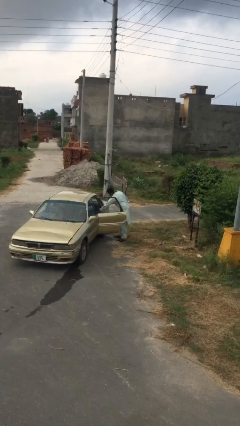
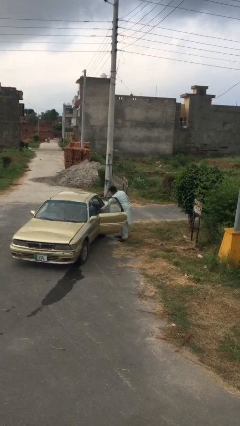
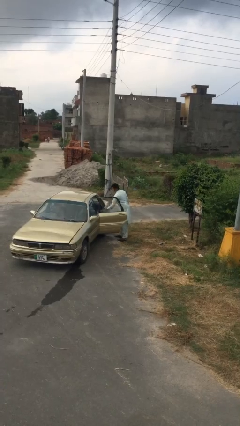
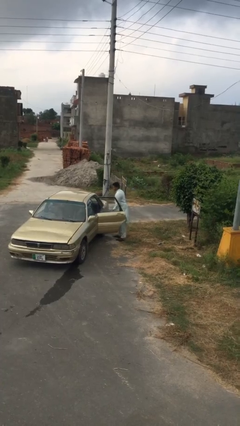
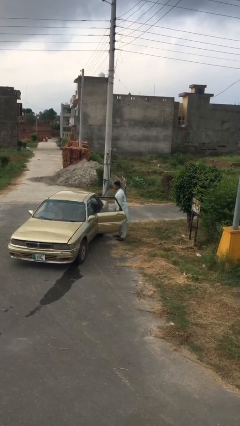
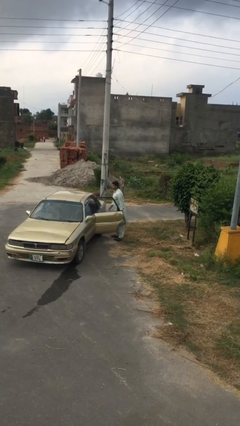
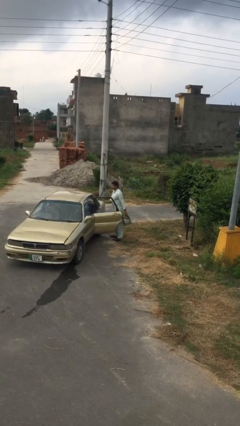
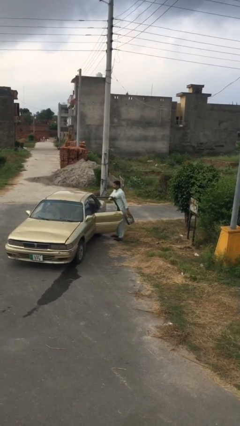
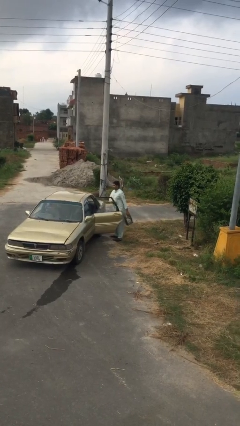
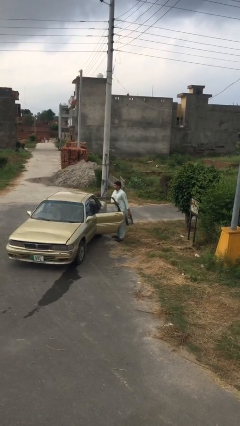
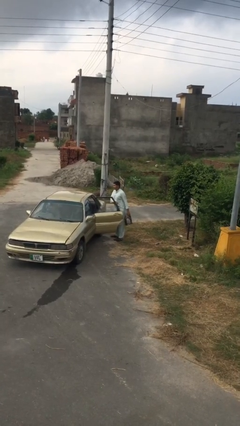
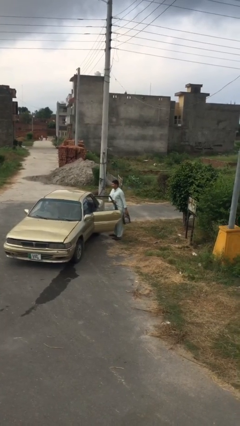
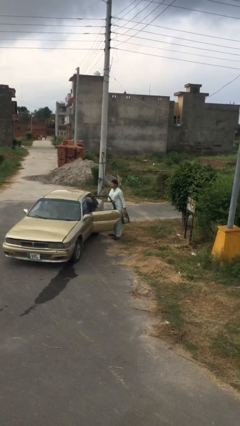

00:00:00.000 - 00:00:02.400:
person unloads car

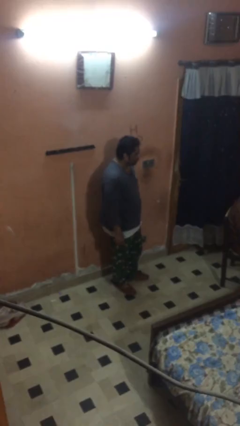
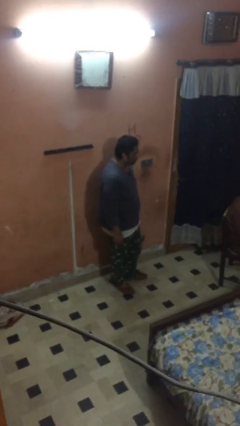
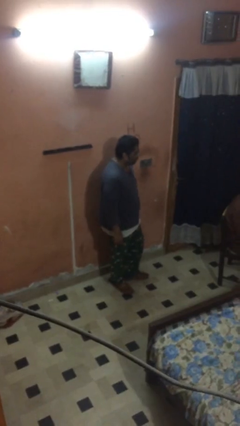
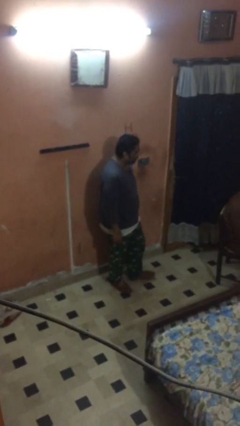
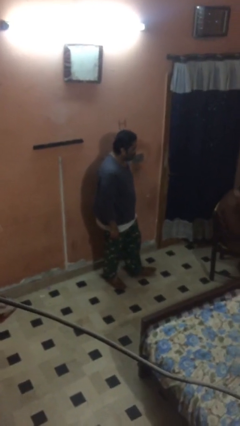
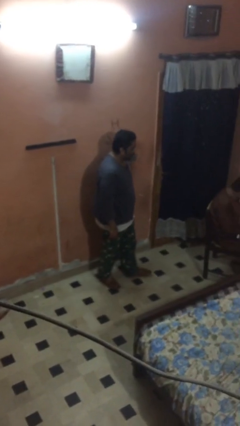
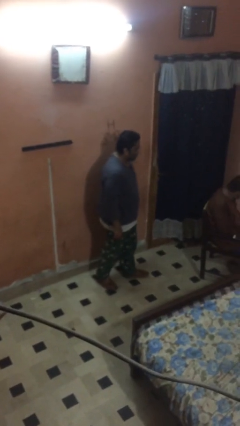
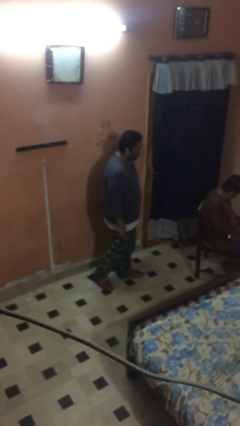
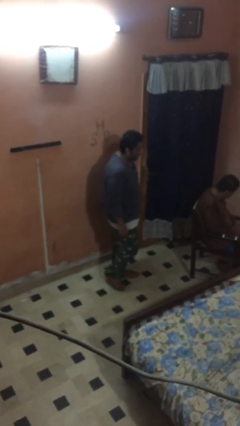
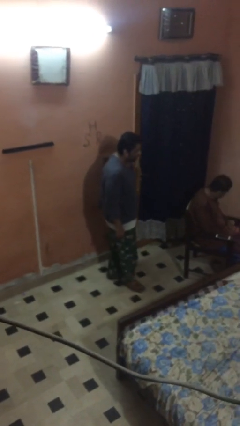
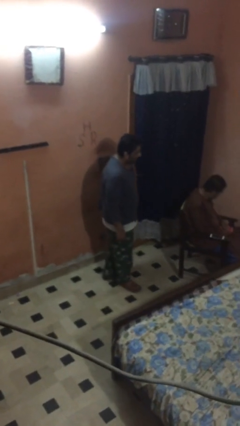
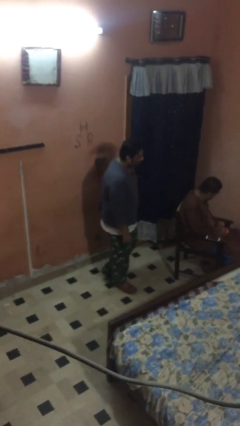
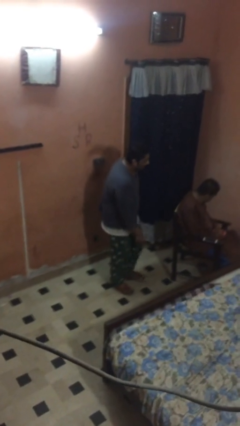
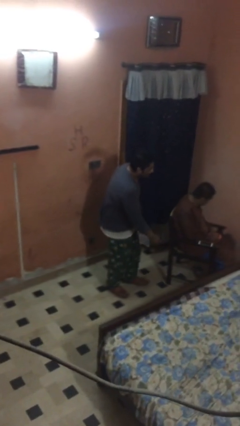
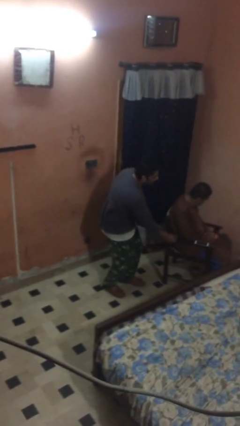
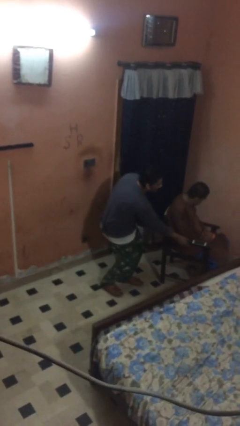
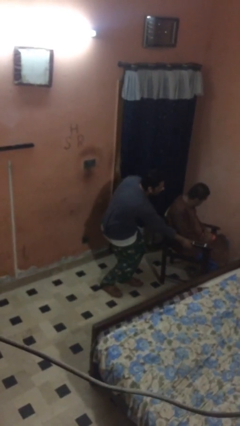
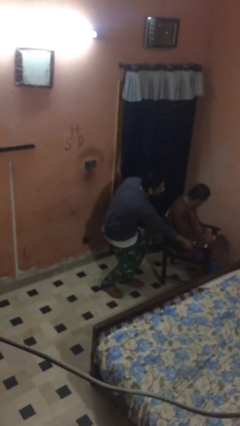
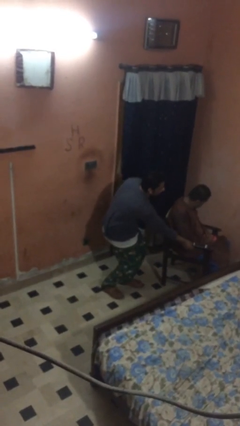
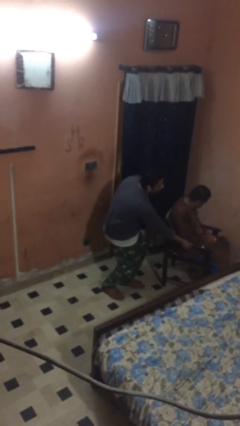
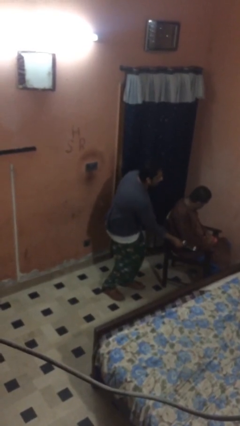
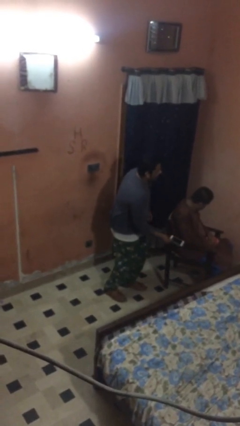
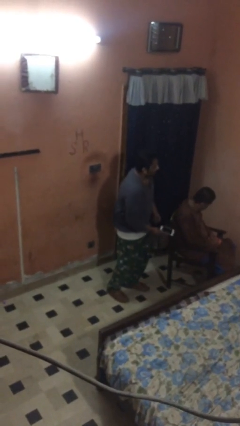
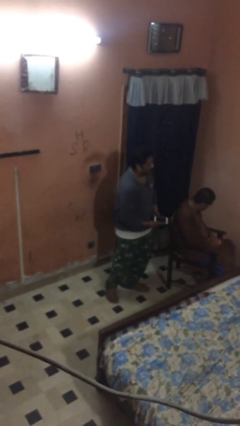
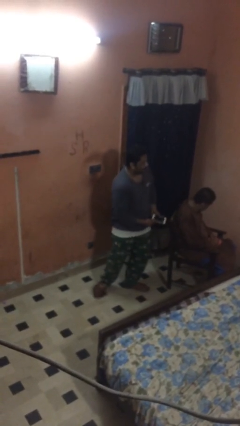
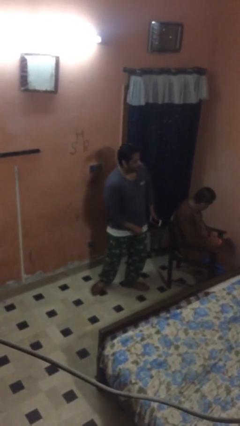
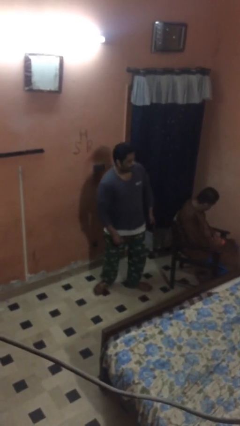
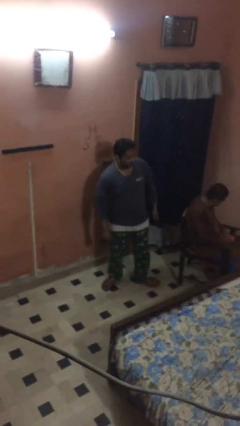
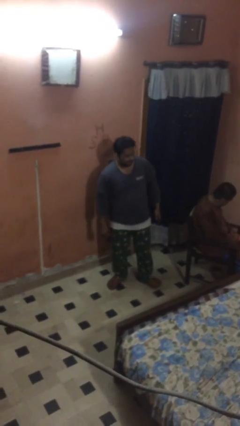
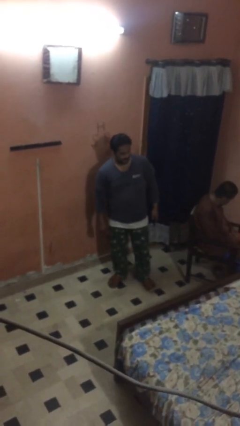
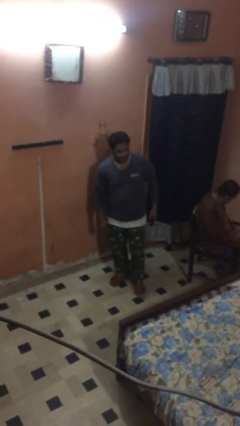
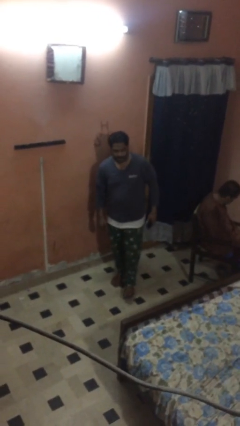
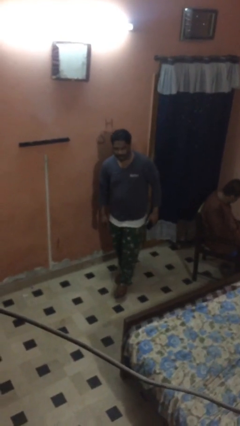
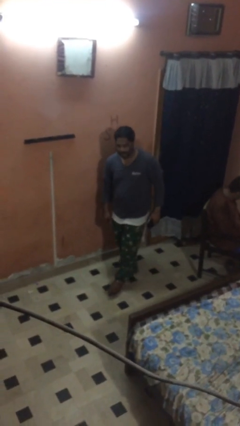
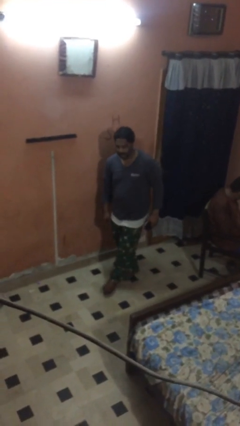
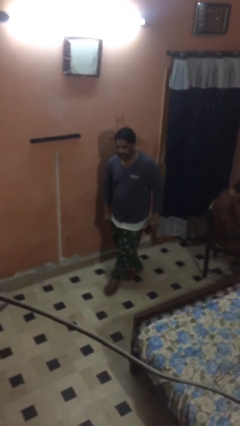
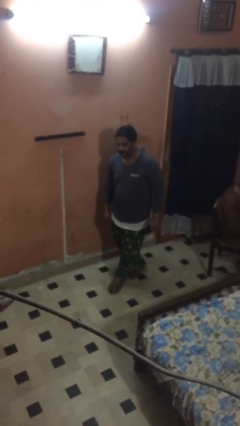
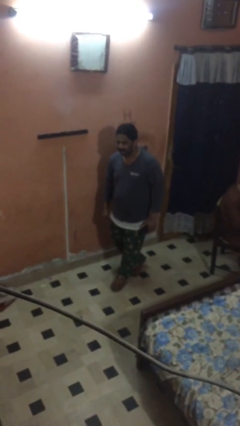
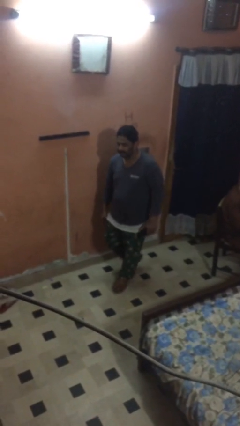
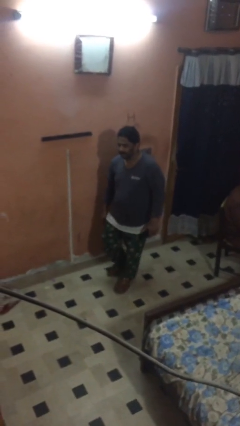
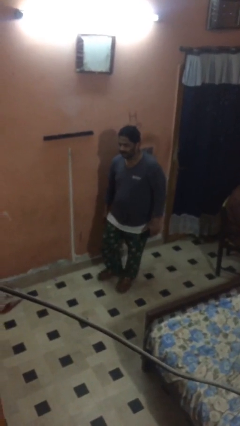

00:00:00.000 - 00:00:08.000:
person steals object from person

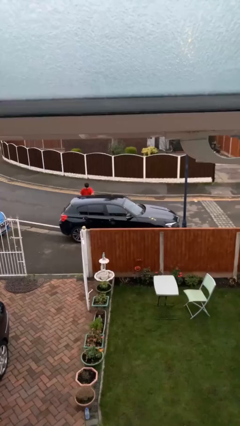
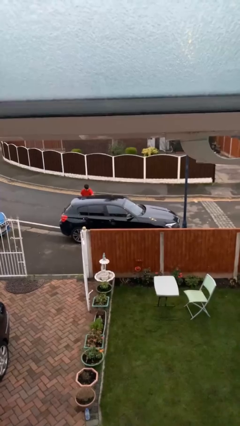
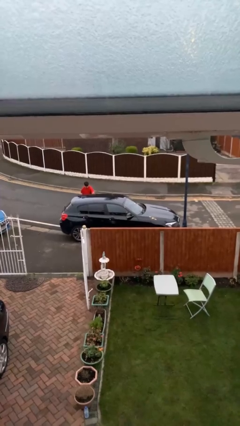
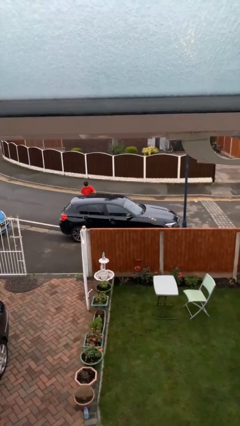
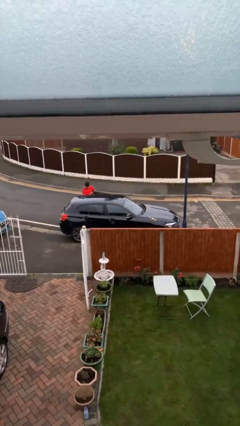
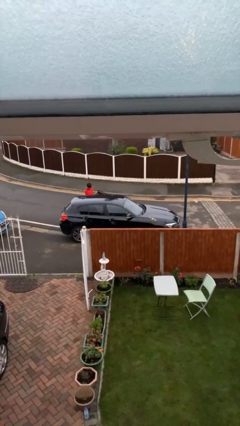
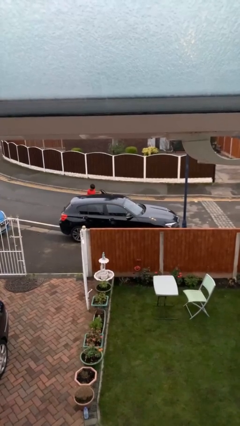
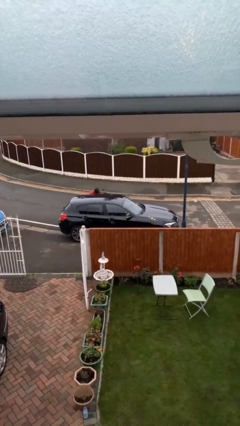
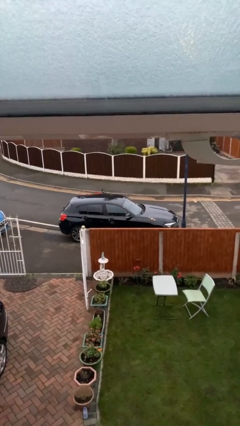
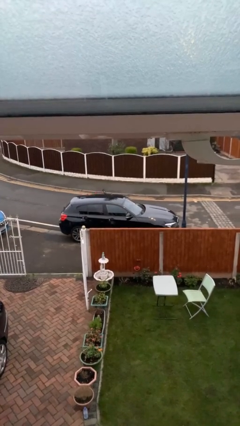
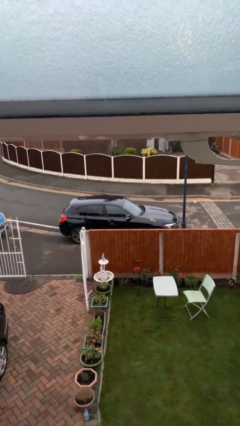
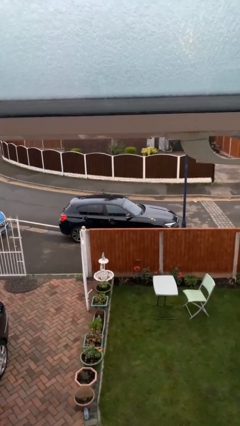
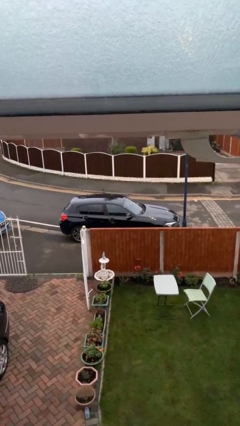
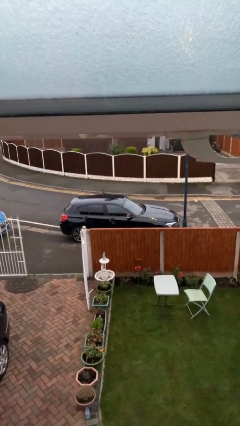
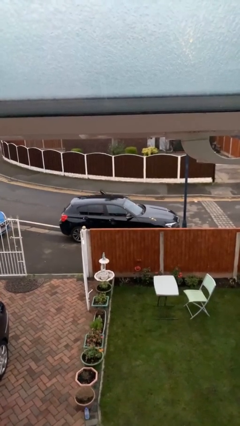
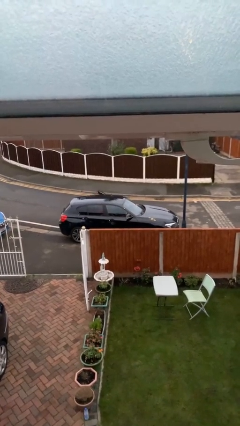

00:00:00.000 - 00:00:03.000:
car picks up person

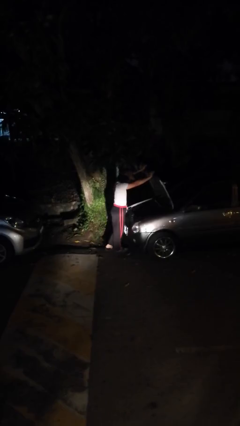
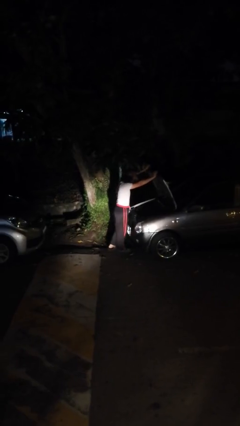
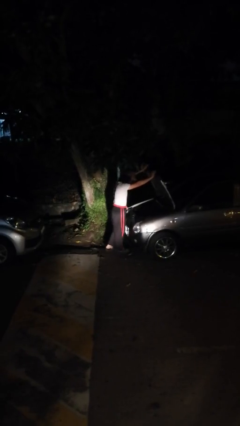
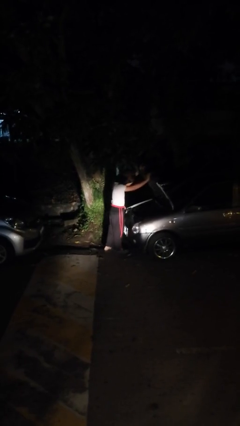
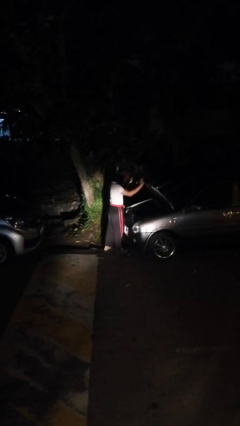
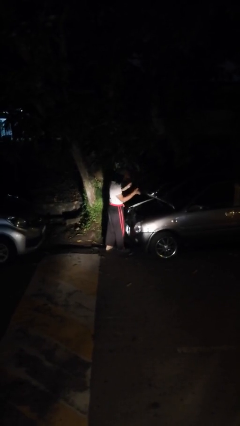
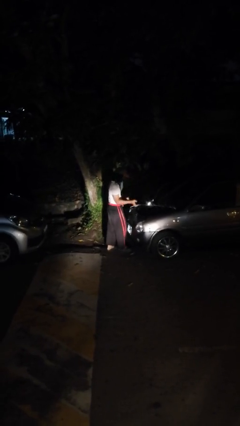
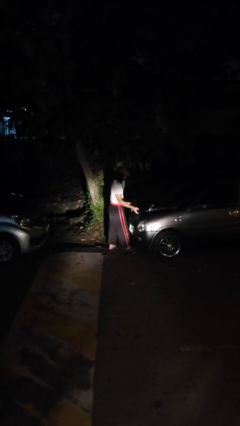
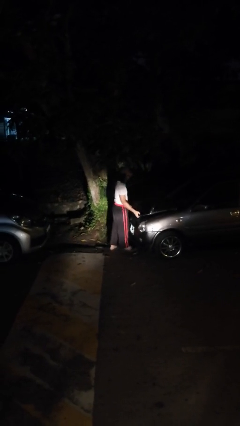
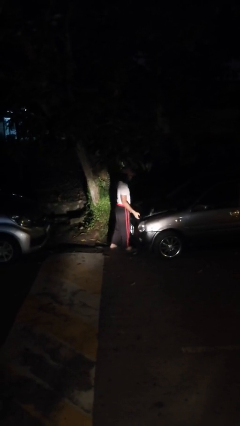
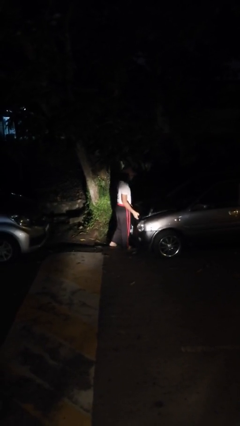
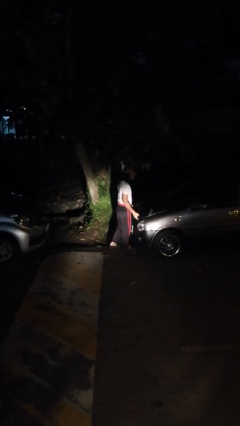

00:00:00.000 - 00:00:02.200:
person closes car hood

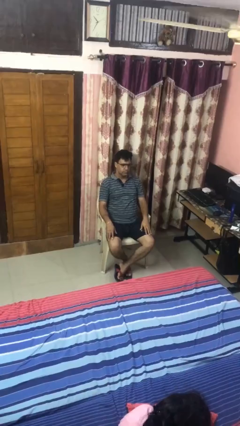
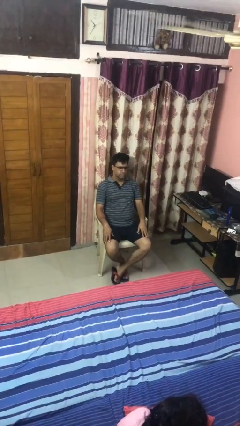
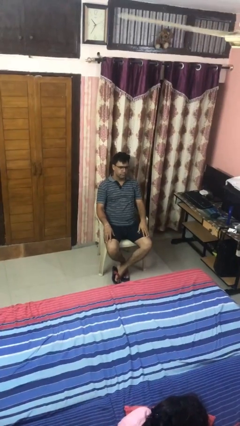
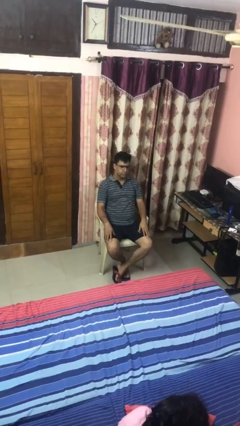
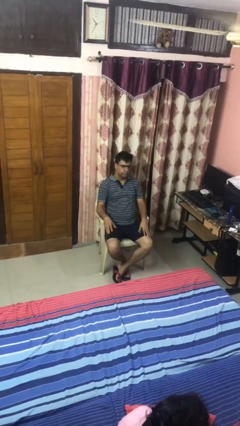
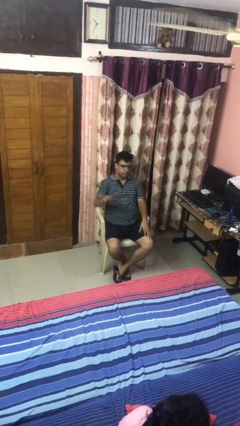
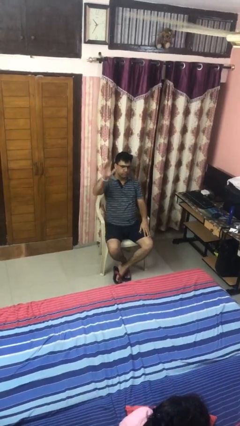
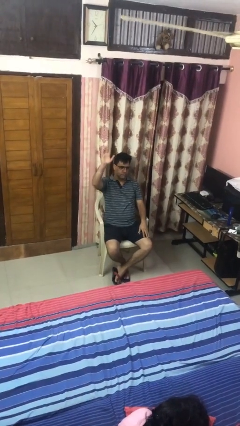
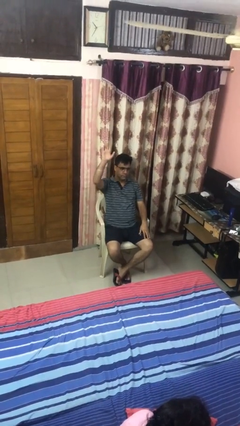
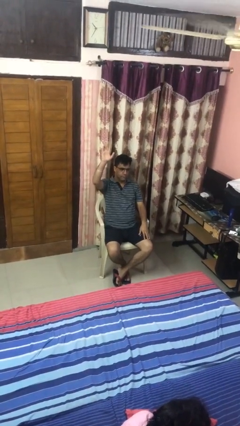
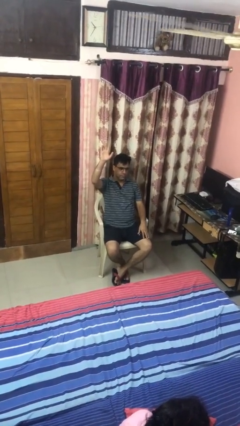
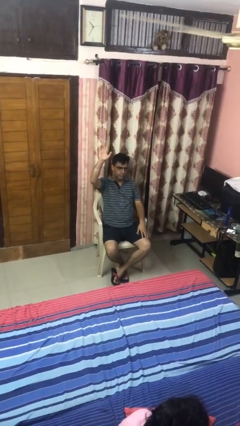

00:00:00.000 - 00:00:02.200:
person gestures raise hand
